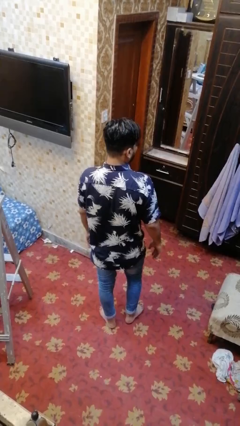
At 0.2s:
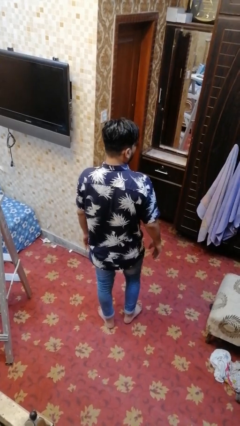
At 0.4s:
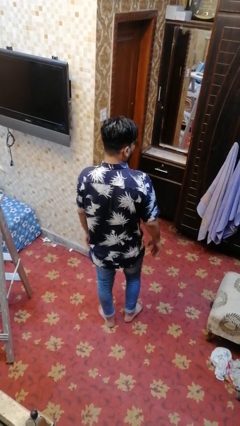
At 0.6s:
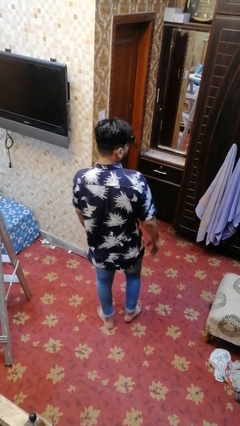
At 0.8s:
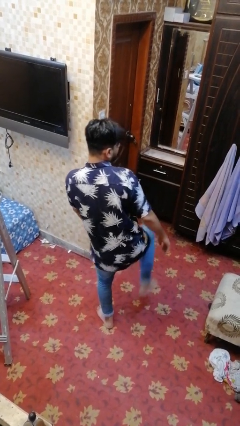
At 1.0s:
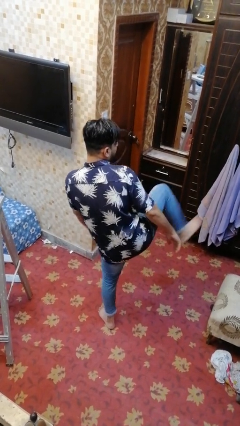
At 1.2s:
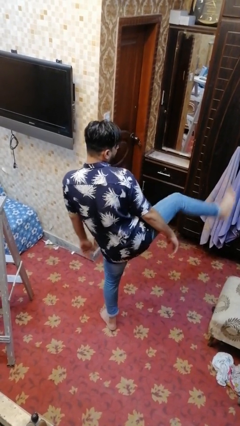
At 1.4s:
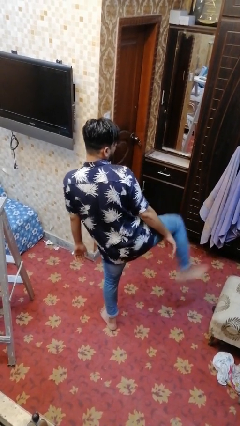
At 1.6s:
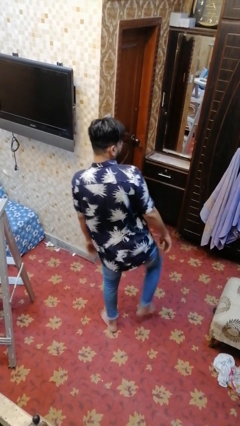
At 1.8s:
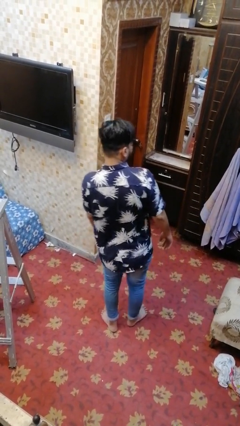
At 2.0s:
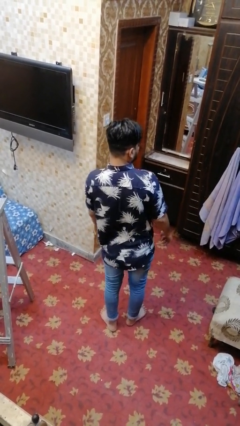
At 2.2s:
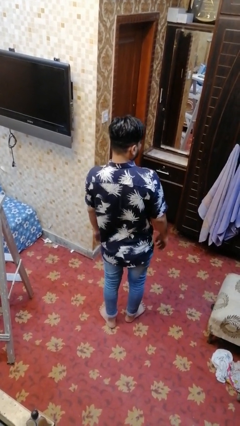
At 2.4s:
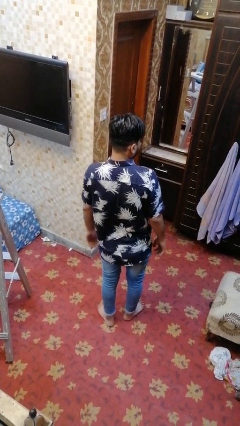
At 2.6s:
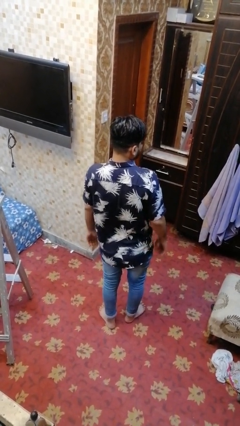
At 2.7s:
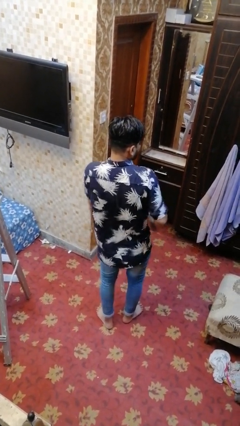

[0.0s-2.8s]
person karate kicks

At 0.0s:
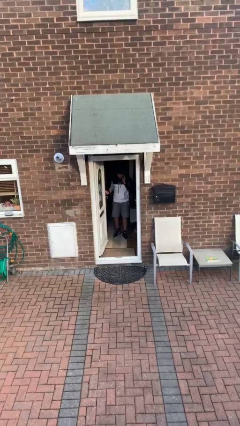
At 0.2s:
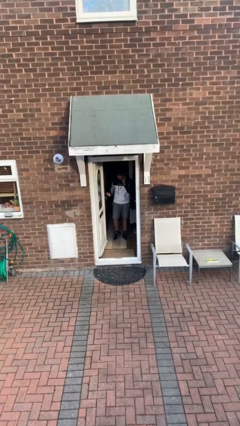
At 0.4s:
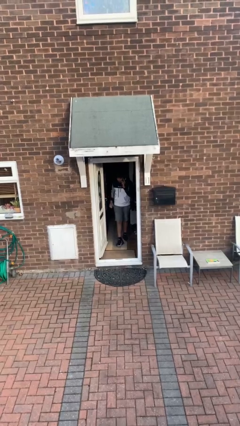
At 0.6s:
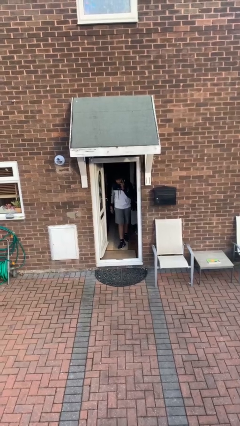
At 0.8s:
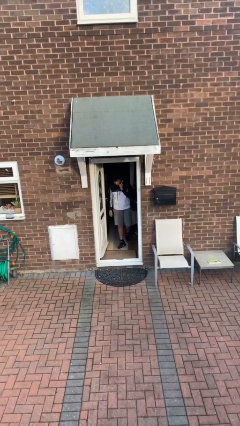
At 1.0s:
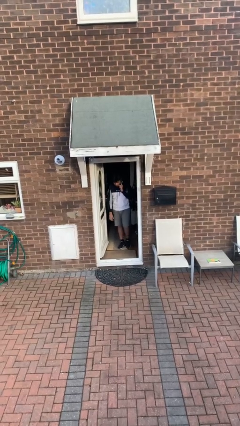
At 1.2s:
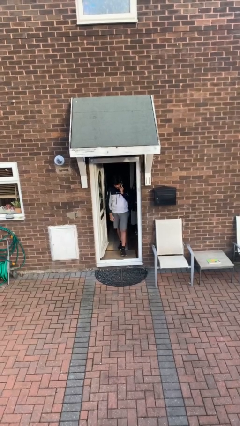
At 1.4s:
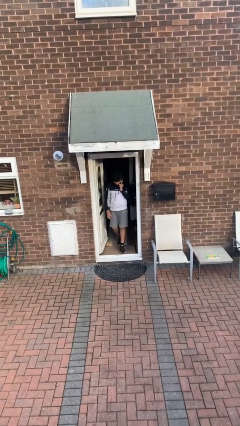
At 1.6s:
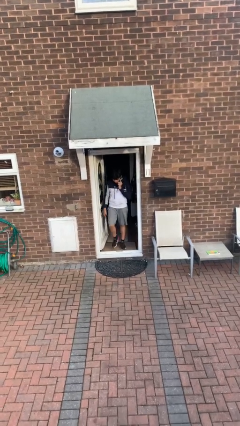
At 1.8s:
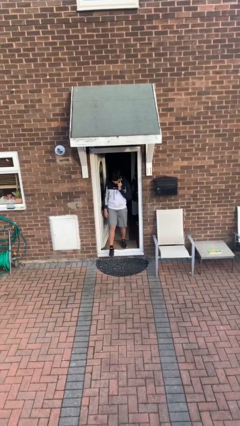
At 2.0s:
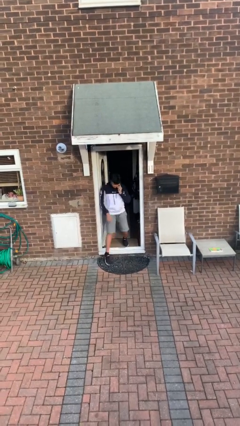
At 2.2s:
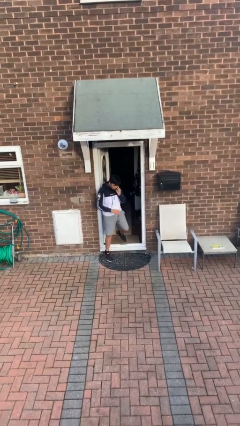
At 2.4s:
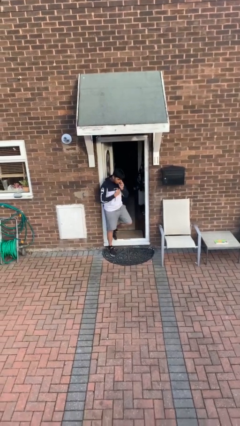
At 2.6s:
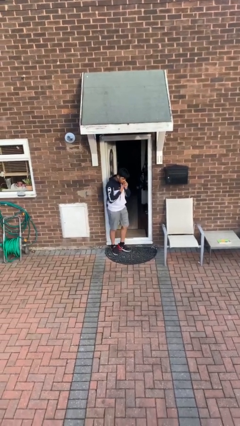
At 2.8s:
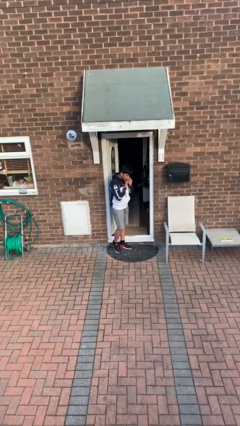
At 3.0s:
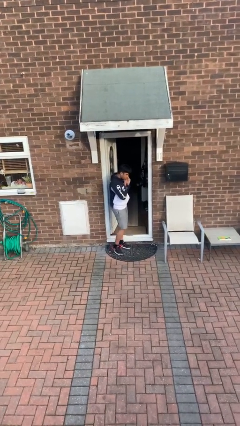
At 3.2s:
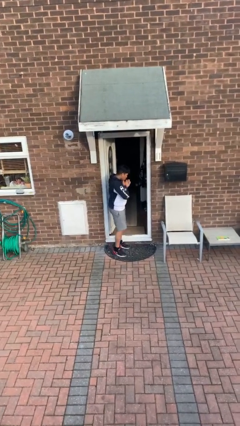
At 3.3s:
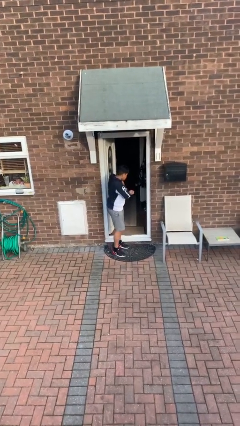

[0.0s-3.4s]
person enters scene through structure

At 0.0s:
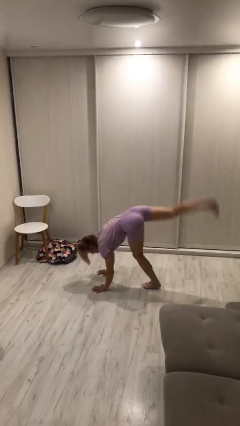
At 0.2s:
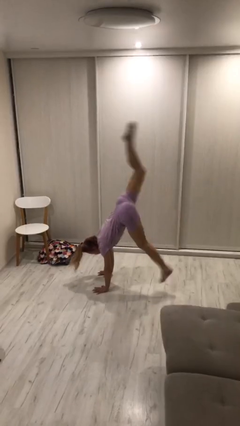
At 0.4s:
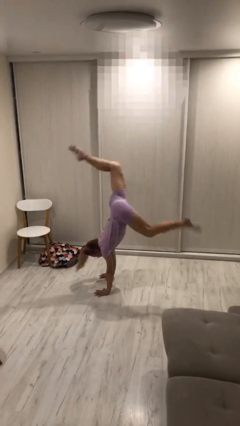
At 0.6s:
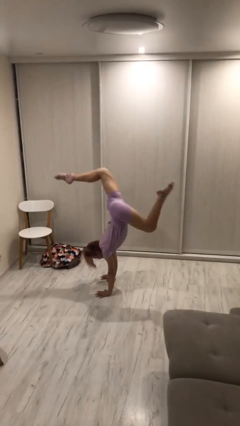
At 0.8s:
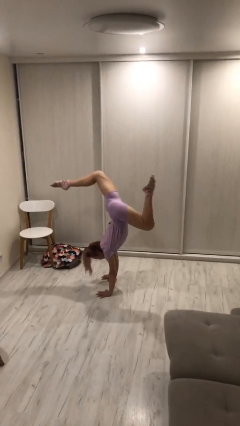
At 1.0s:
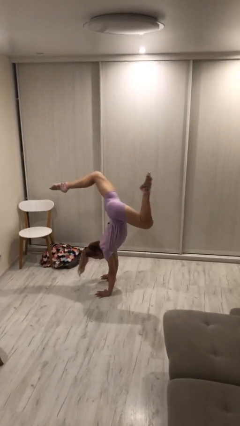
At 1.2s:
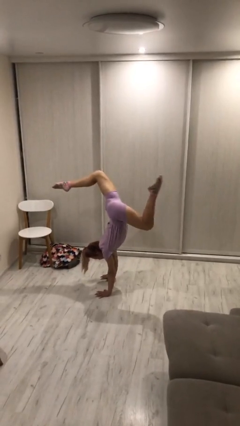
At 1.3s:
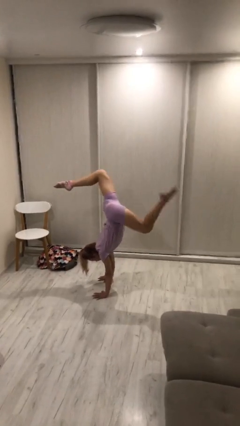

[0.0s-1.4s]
person handstand

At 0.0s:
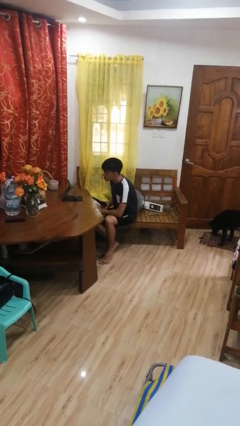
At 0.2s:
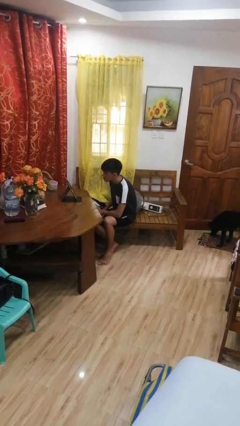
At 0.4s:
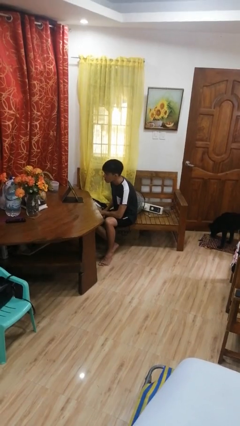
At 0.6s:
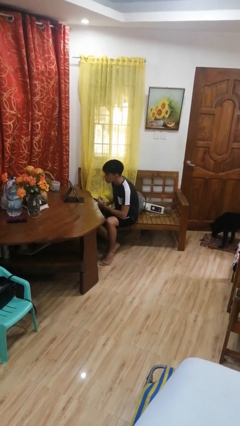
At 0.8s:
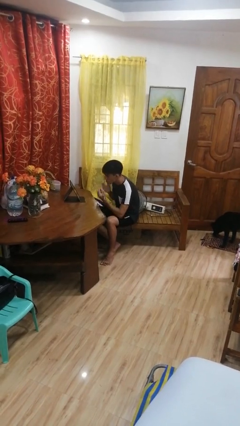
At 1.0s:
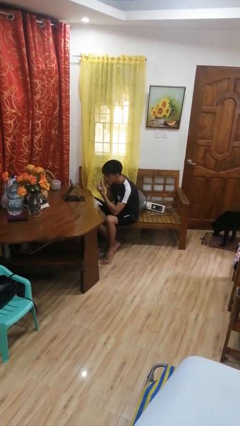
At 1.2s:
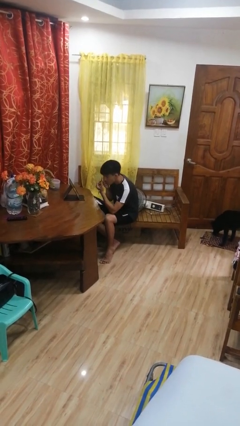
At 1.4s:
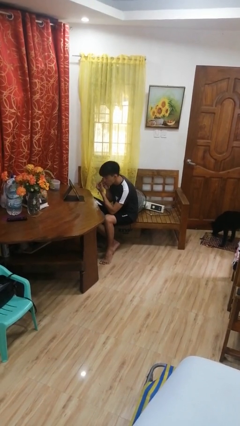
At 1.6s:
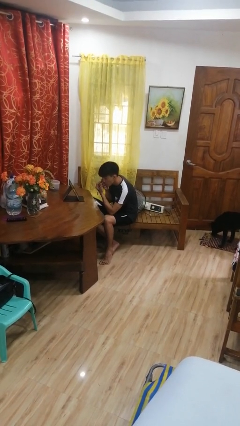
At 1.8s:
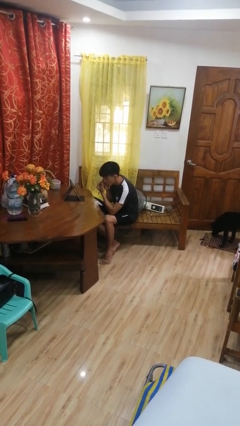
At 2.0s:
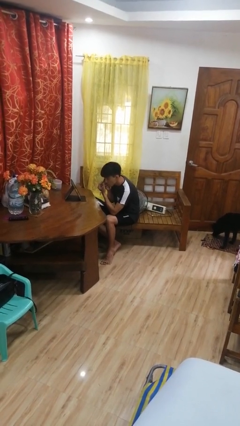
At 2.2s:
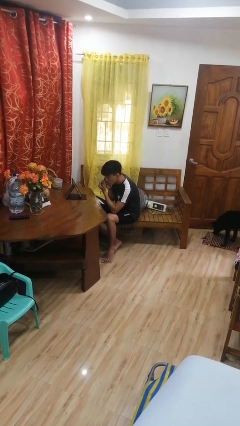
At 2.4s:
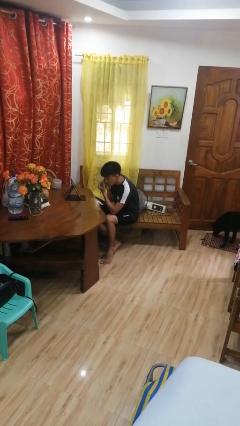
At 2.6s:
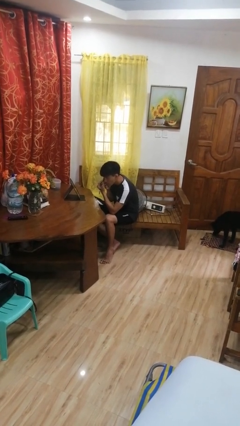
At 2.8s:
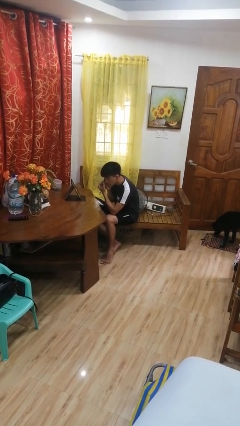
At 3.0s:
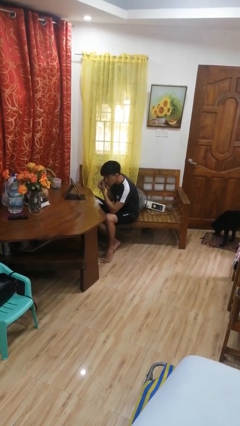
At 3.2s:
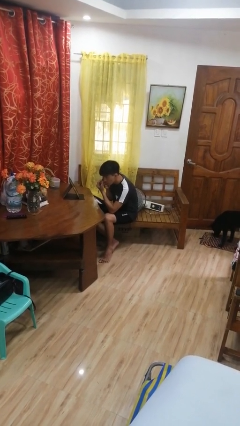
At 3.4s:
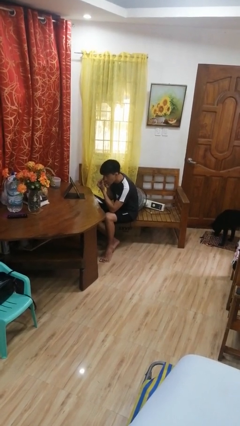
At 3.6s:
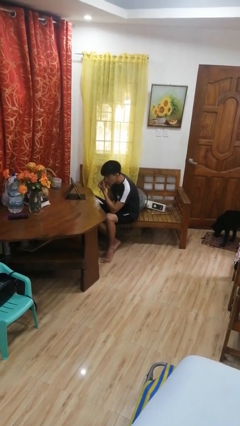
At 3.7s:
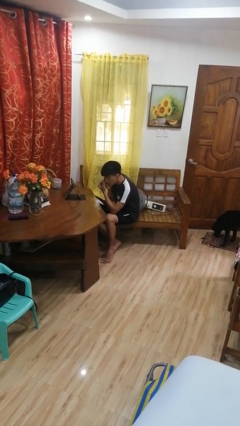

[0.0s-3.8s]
person applies eye makeup

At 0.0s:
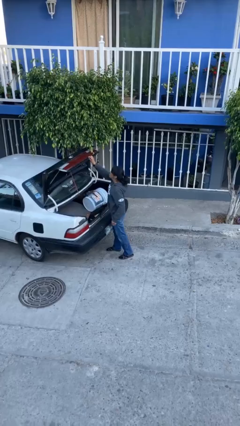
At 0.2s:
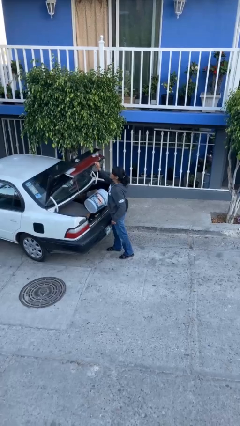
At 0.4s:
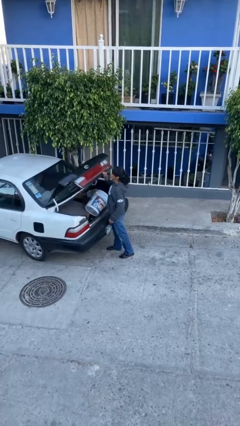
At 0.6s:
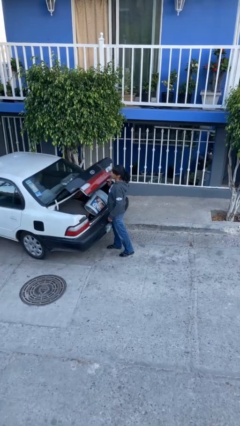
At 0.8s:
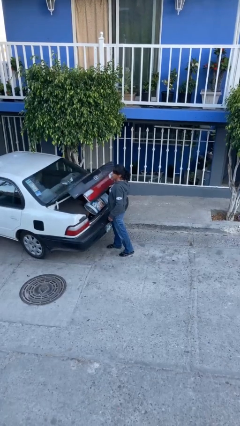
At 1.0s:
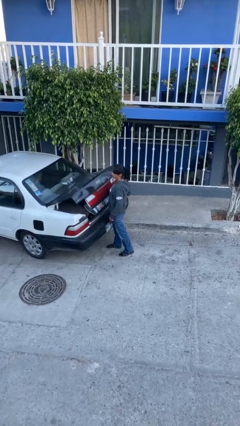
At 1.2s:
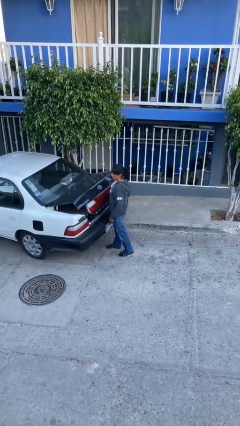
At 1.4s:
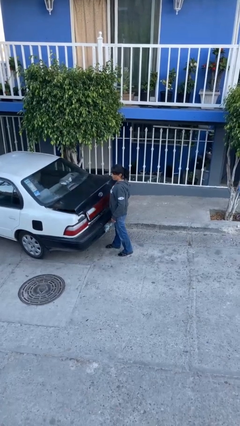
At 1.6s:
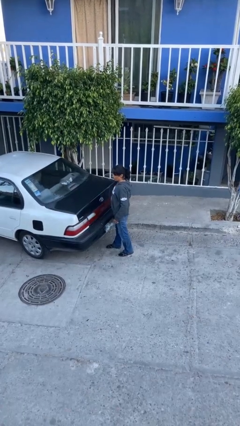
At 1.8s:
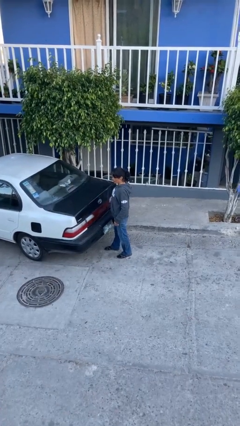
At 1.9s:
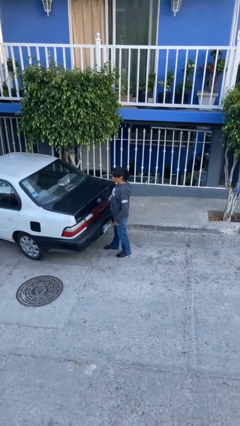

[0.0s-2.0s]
person closes car trunk

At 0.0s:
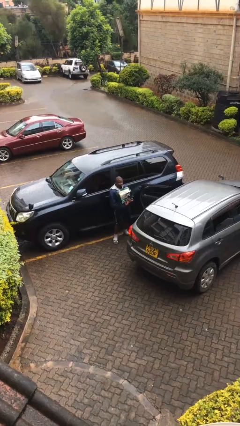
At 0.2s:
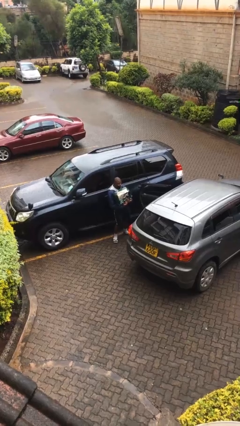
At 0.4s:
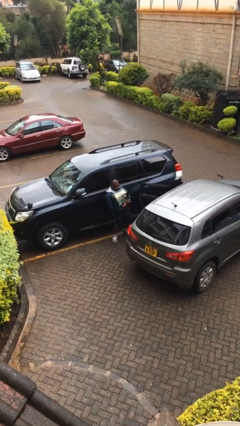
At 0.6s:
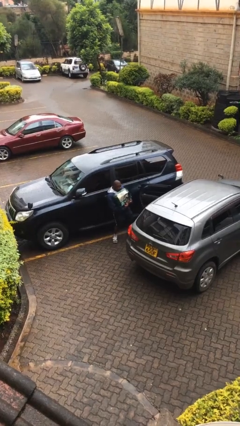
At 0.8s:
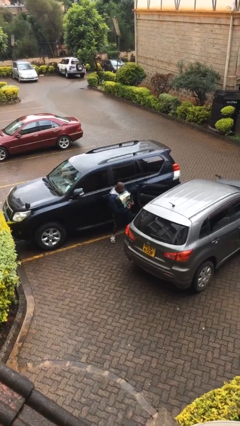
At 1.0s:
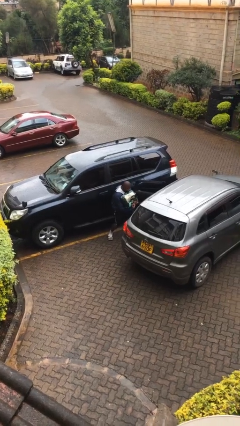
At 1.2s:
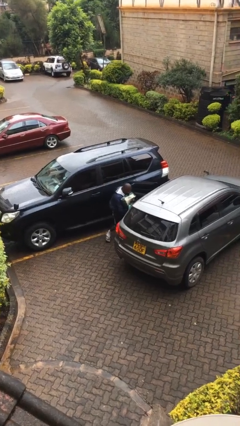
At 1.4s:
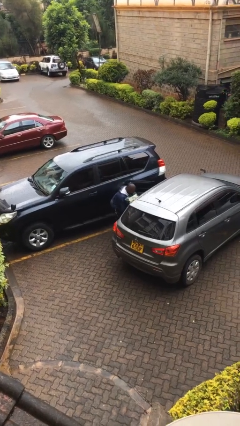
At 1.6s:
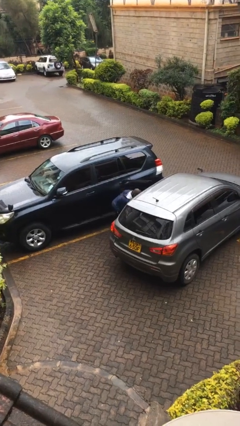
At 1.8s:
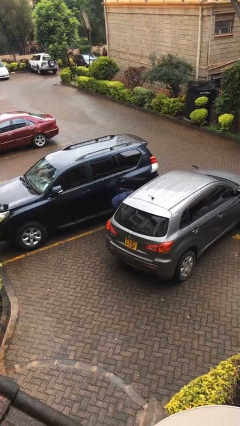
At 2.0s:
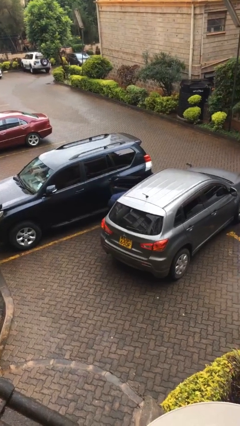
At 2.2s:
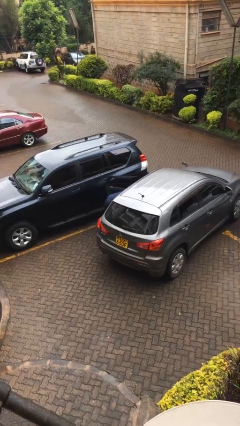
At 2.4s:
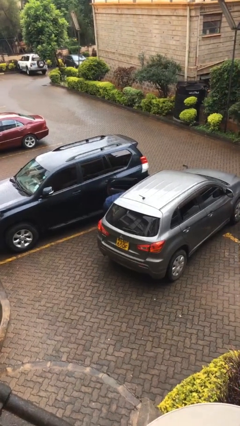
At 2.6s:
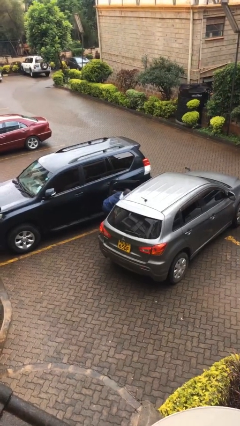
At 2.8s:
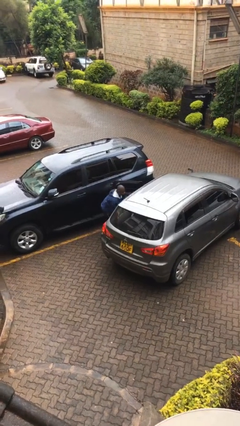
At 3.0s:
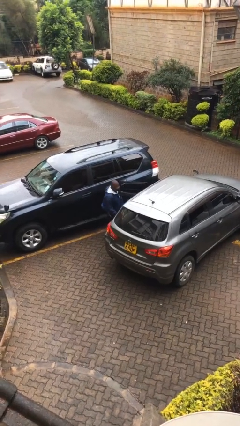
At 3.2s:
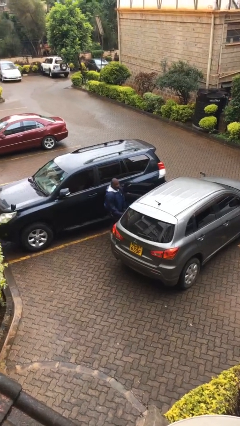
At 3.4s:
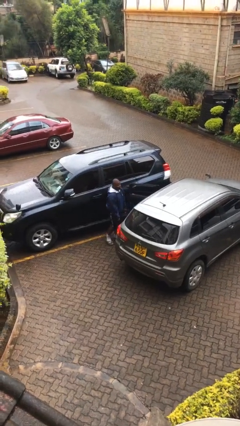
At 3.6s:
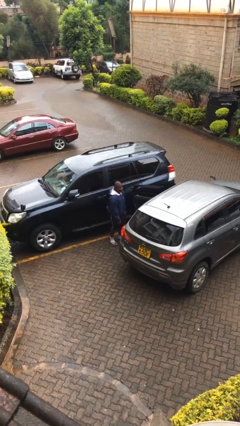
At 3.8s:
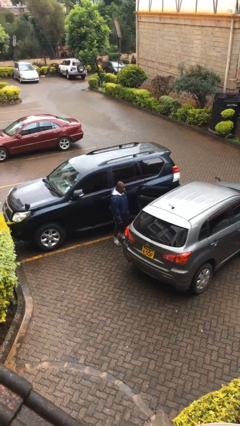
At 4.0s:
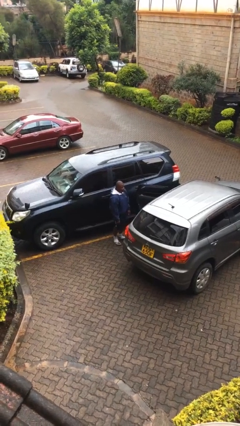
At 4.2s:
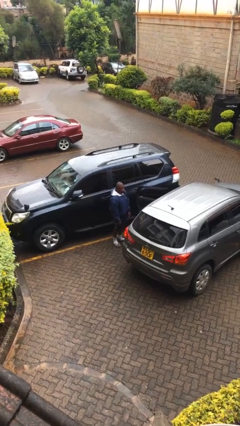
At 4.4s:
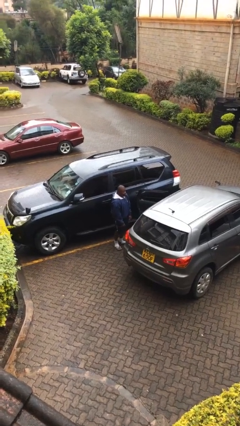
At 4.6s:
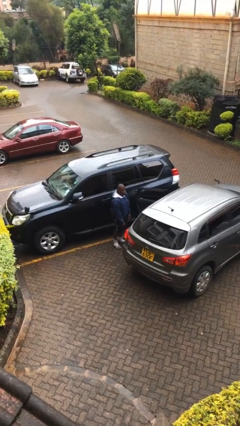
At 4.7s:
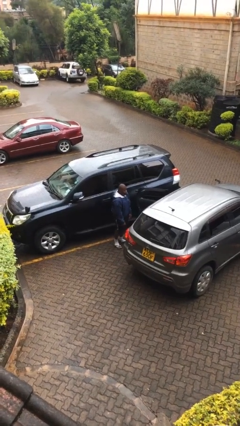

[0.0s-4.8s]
person loads car
